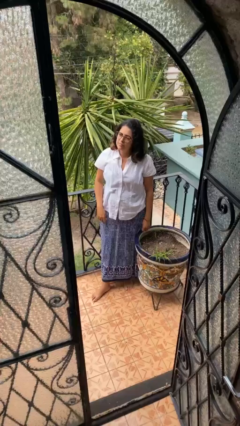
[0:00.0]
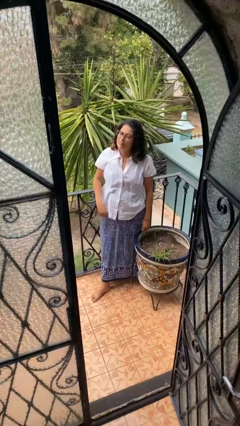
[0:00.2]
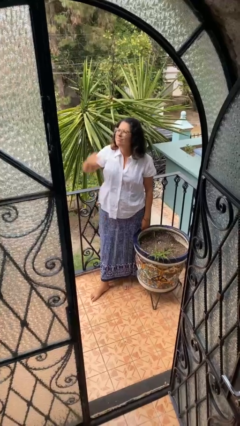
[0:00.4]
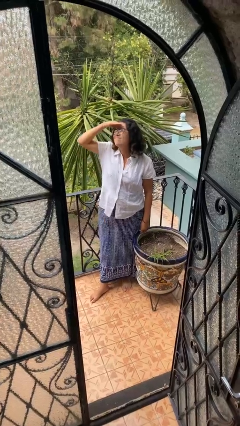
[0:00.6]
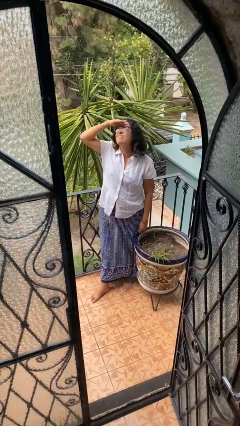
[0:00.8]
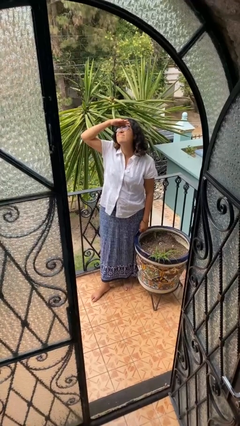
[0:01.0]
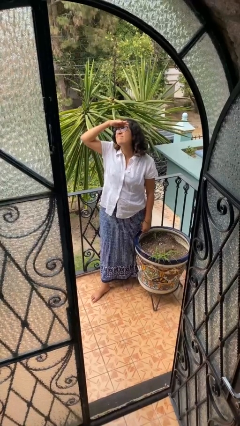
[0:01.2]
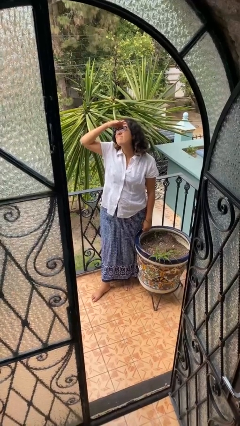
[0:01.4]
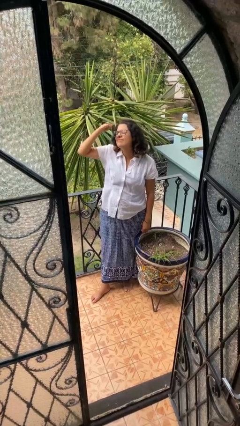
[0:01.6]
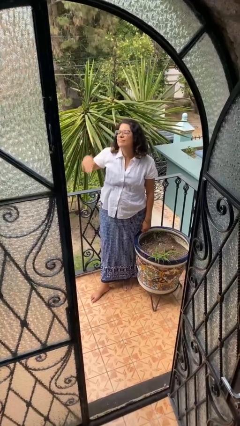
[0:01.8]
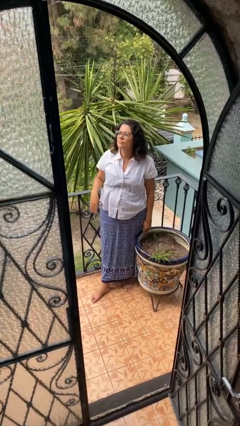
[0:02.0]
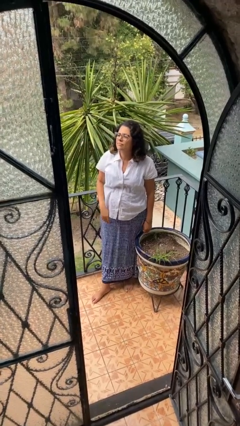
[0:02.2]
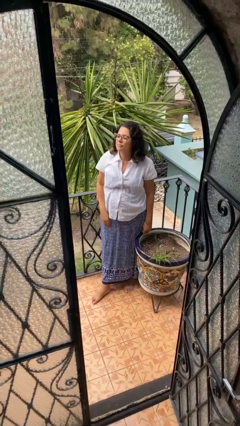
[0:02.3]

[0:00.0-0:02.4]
person shades eyes

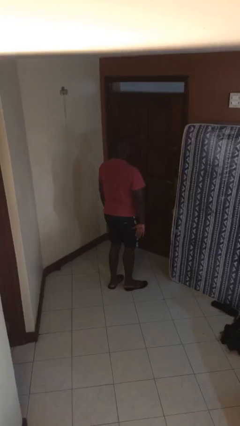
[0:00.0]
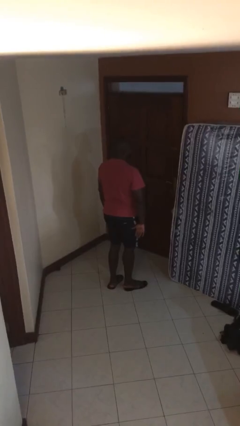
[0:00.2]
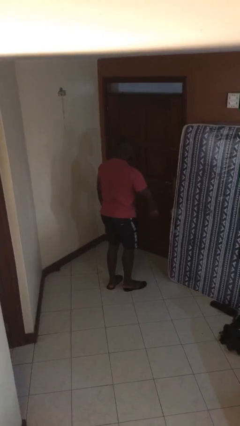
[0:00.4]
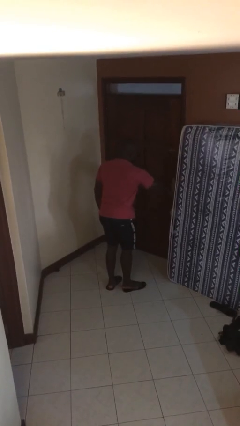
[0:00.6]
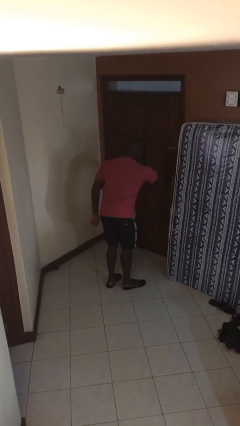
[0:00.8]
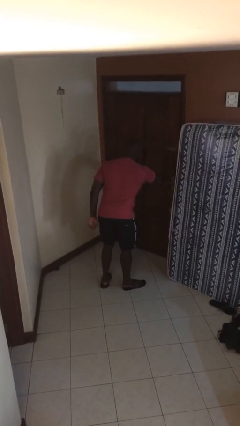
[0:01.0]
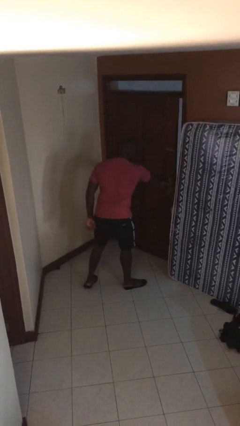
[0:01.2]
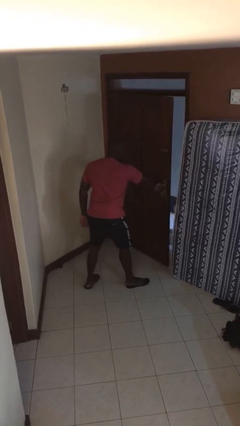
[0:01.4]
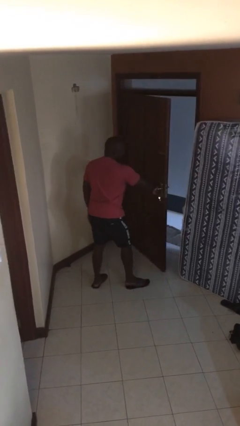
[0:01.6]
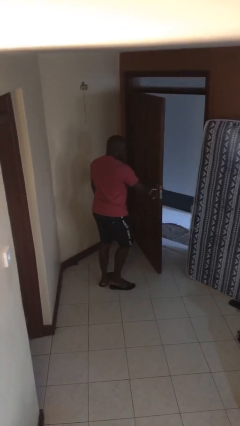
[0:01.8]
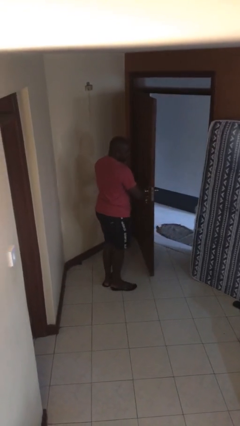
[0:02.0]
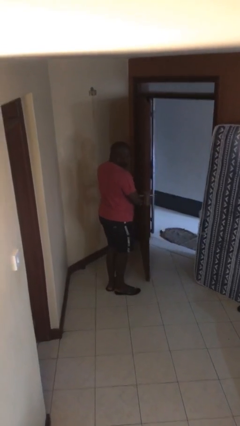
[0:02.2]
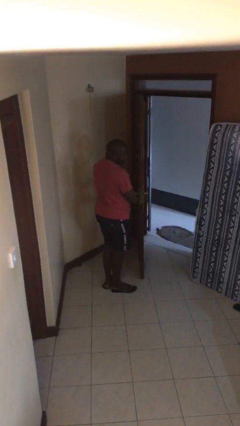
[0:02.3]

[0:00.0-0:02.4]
person opens facility door

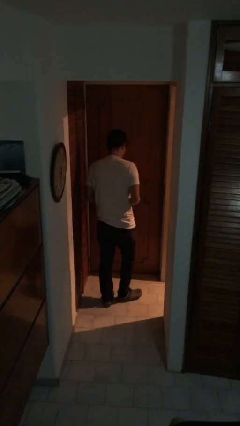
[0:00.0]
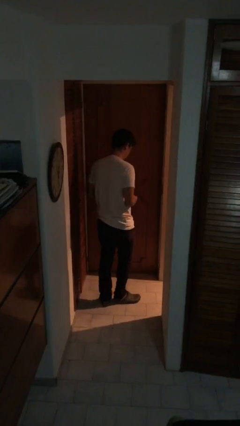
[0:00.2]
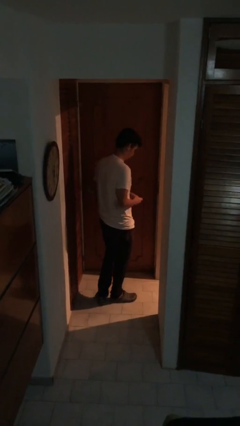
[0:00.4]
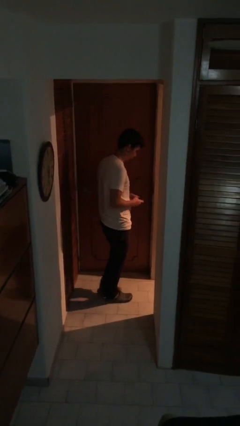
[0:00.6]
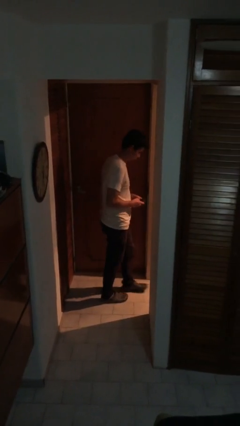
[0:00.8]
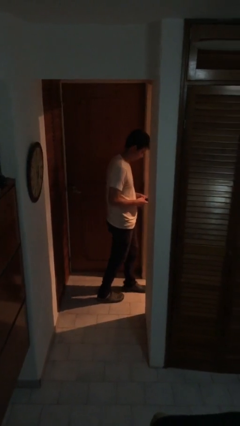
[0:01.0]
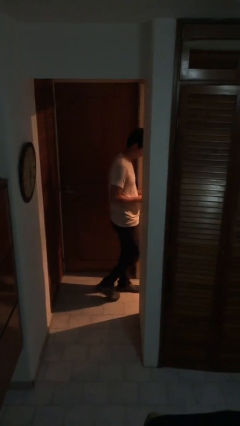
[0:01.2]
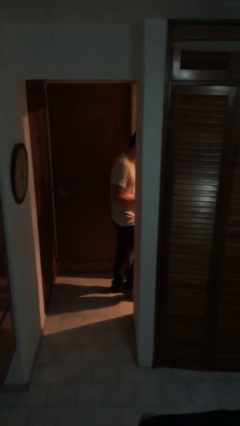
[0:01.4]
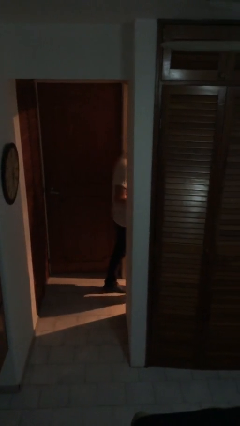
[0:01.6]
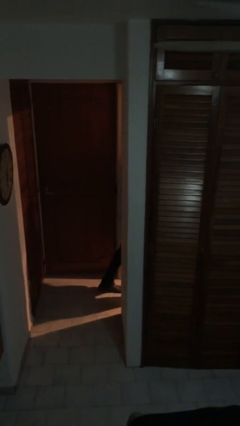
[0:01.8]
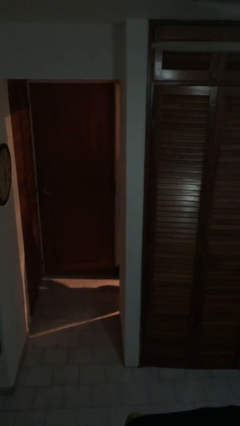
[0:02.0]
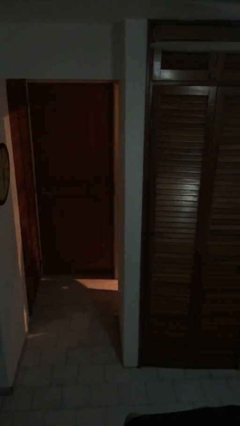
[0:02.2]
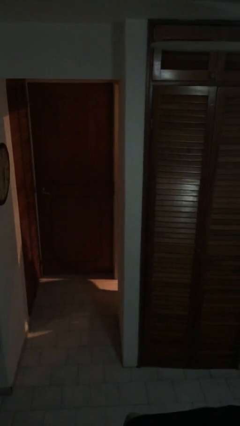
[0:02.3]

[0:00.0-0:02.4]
person exits scene through structure

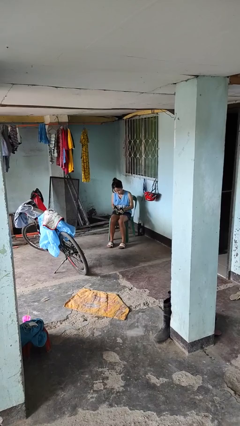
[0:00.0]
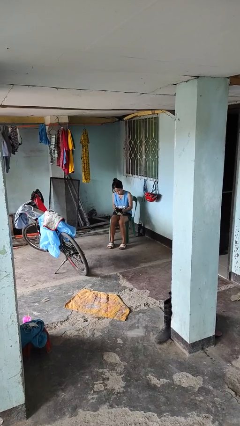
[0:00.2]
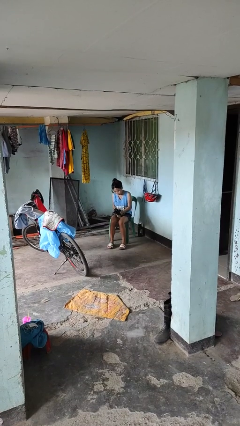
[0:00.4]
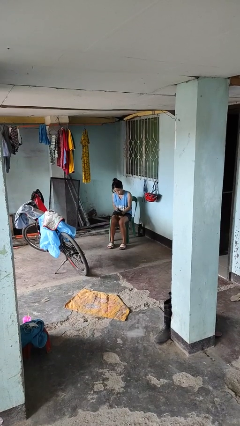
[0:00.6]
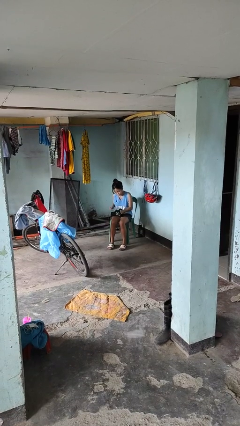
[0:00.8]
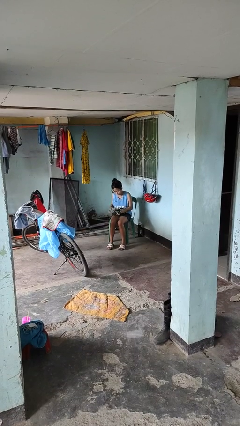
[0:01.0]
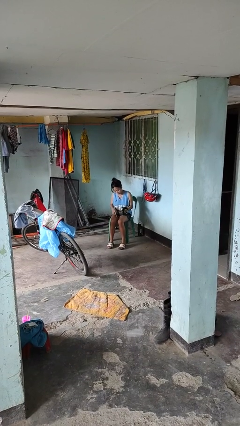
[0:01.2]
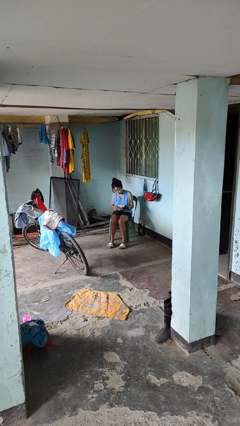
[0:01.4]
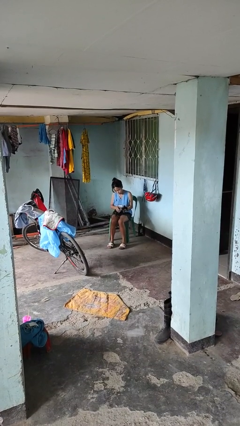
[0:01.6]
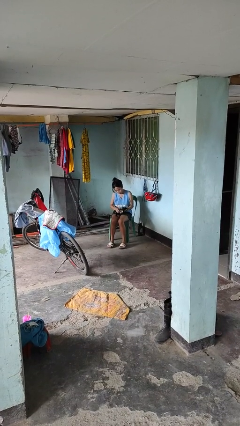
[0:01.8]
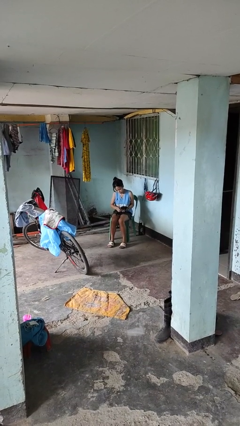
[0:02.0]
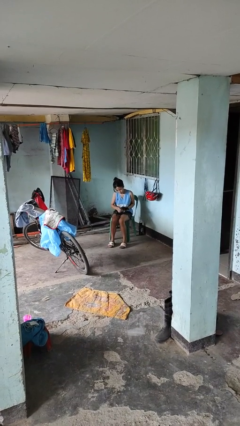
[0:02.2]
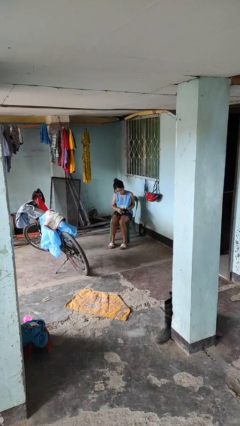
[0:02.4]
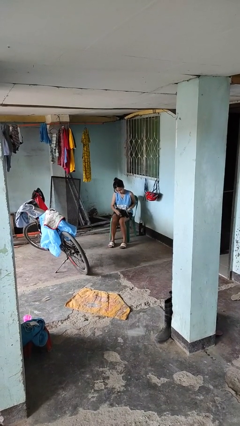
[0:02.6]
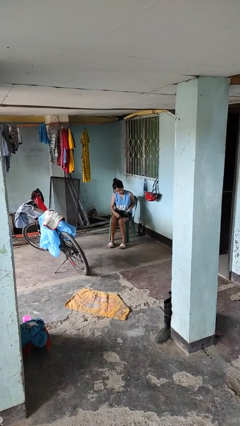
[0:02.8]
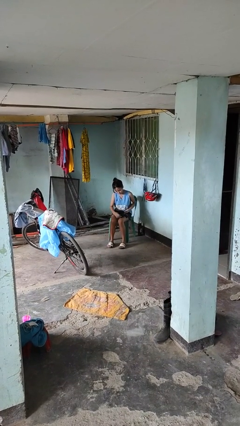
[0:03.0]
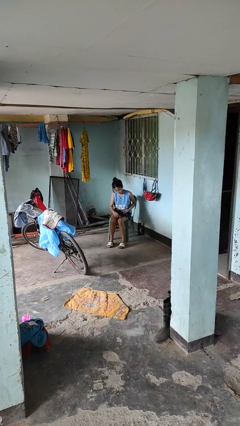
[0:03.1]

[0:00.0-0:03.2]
person takes off gloves

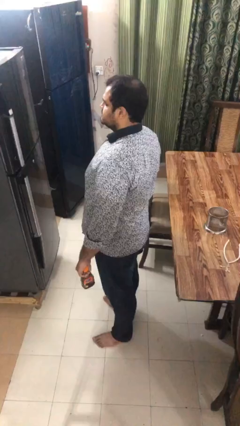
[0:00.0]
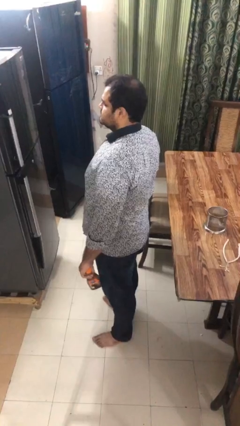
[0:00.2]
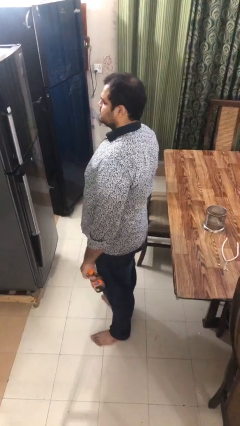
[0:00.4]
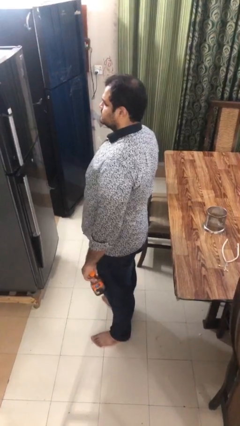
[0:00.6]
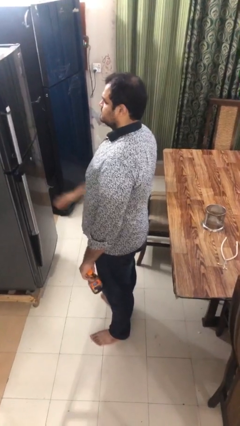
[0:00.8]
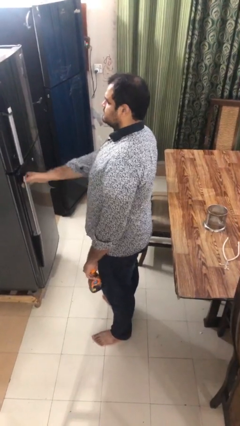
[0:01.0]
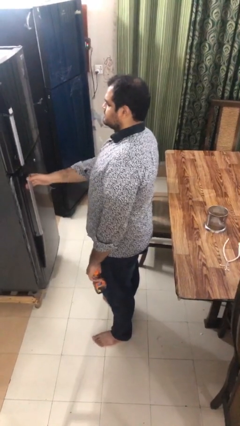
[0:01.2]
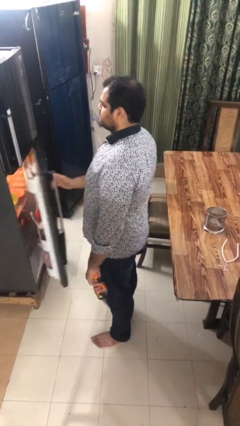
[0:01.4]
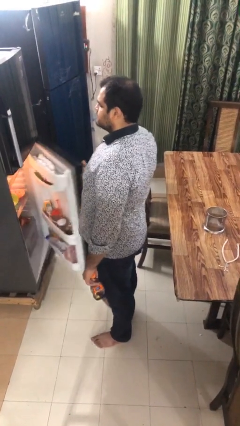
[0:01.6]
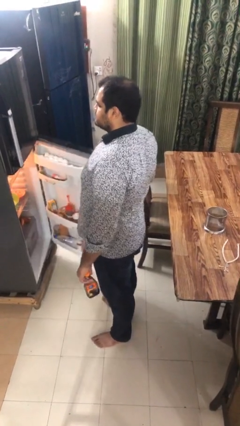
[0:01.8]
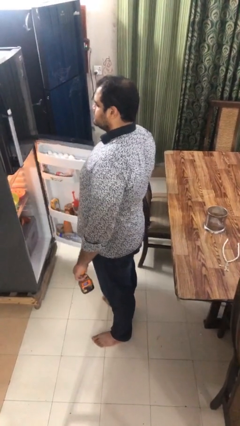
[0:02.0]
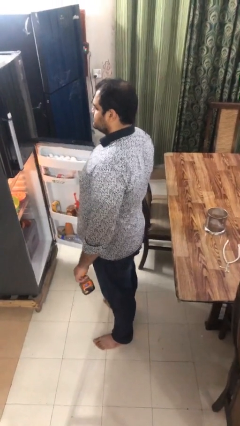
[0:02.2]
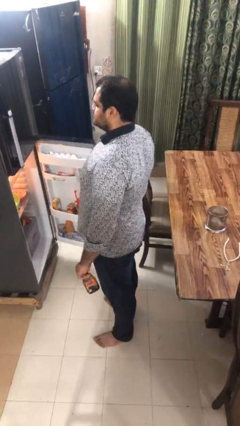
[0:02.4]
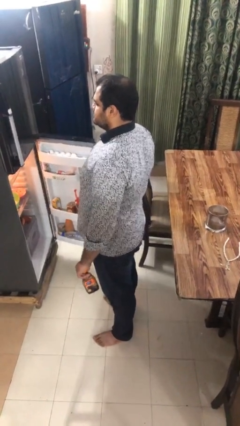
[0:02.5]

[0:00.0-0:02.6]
person opens refrigerator

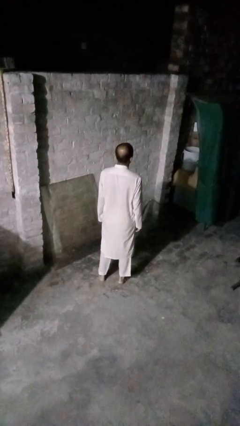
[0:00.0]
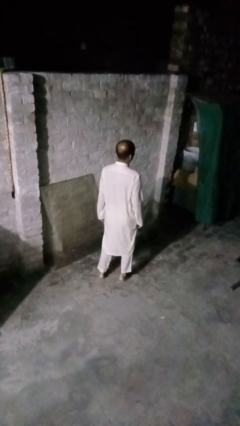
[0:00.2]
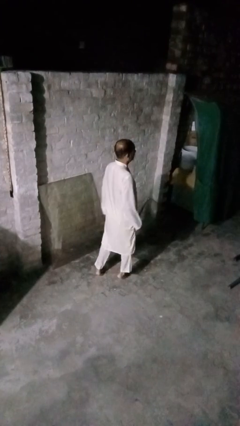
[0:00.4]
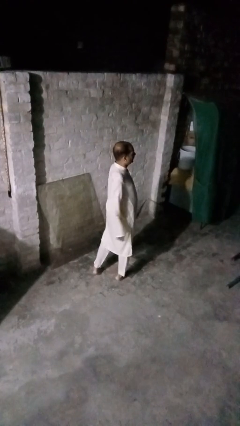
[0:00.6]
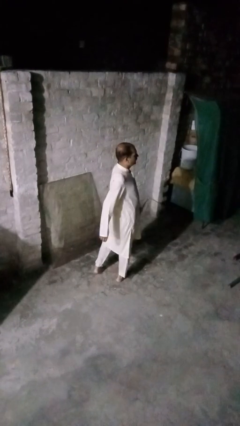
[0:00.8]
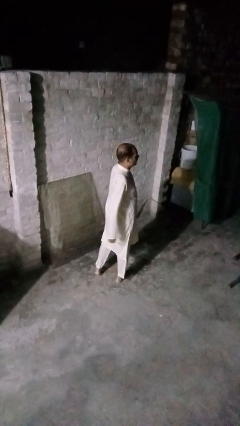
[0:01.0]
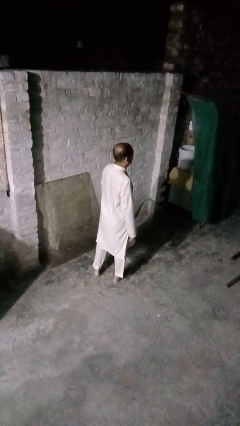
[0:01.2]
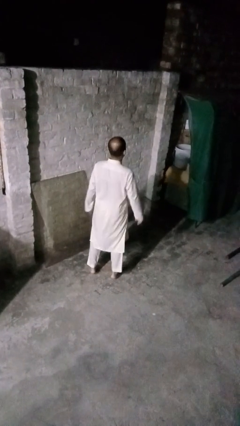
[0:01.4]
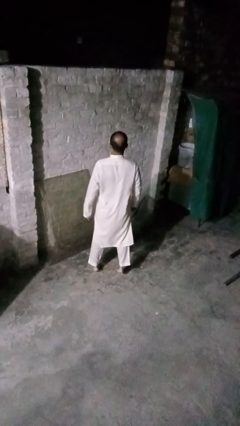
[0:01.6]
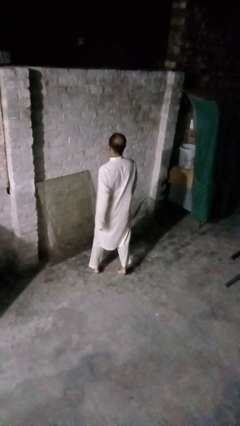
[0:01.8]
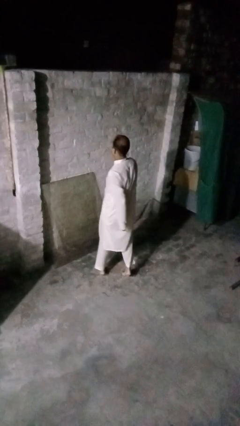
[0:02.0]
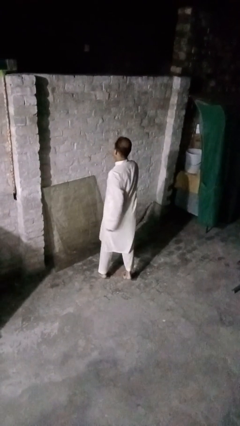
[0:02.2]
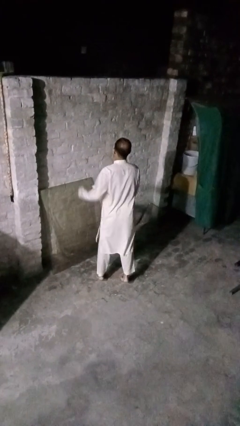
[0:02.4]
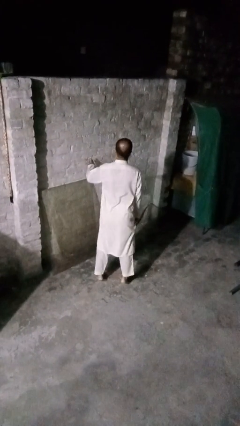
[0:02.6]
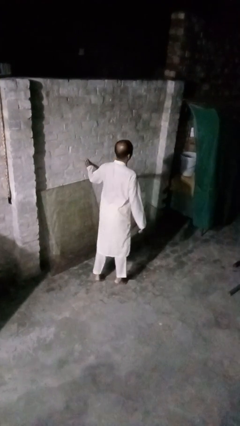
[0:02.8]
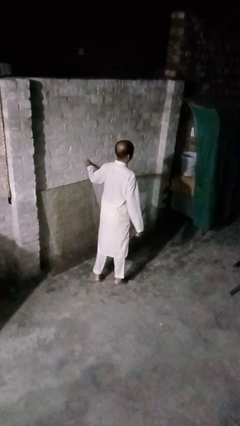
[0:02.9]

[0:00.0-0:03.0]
person twirls

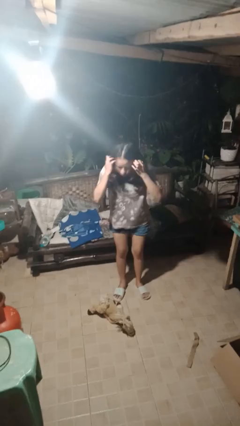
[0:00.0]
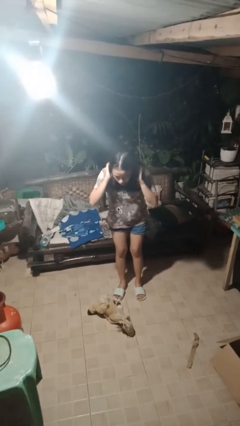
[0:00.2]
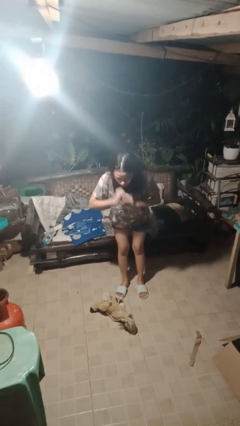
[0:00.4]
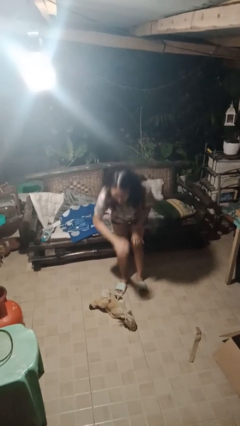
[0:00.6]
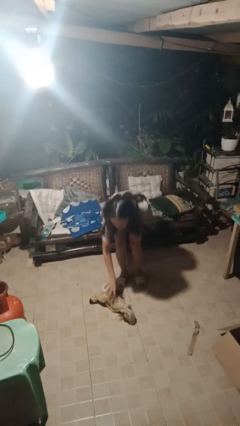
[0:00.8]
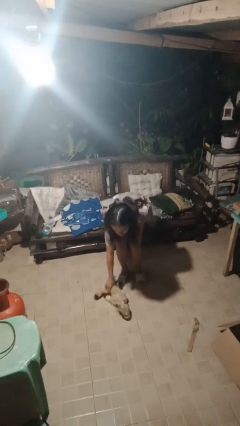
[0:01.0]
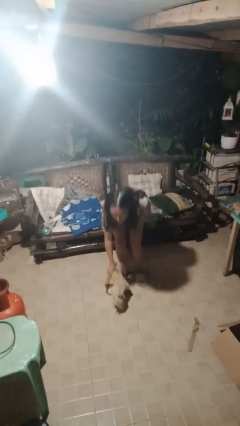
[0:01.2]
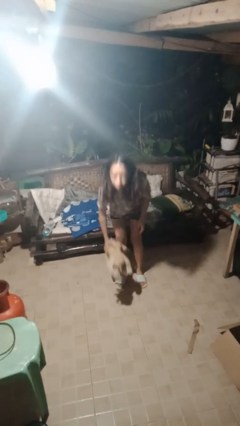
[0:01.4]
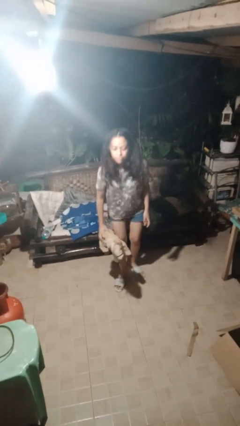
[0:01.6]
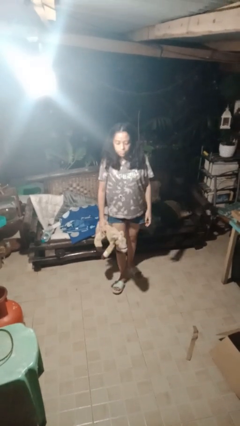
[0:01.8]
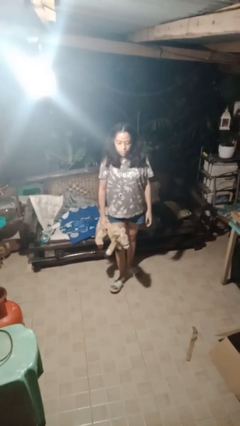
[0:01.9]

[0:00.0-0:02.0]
person picks up object from floor
